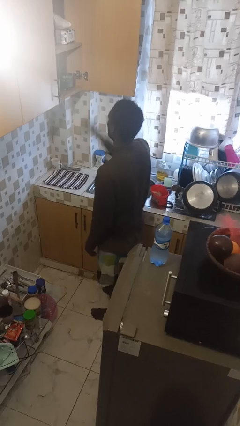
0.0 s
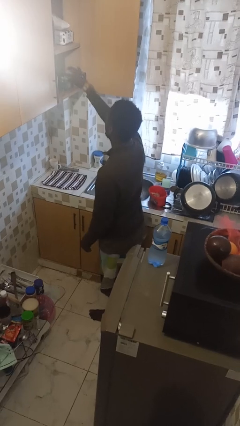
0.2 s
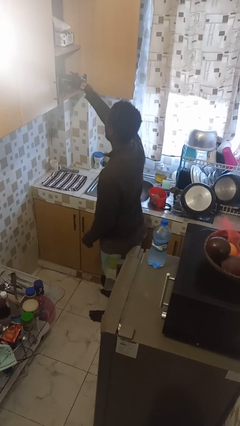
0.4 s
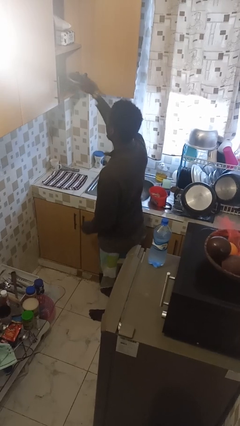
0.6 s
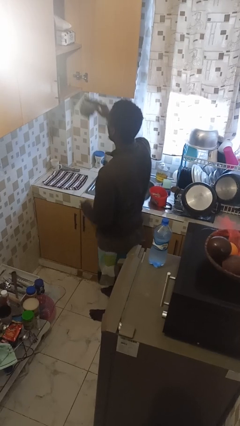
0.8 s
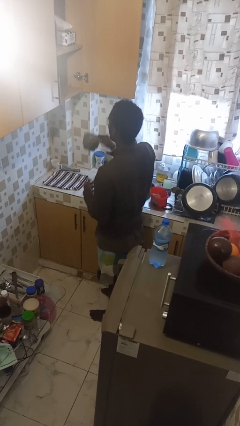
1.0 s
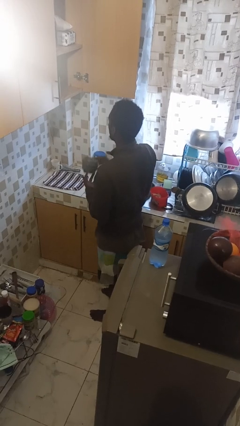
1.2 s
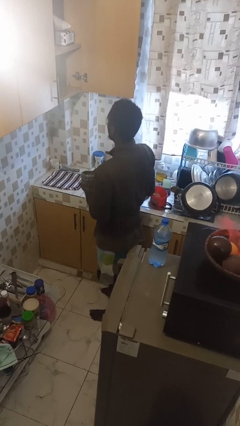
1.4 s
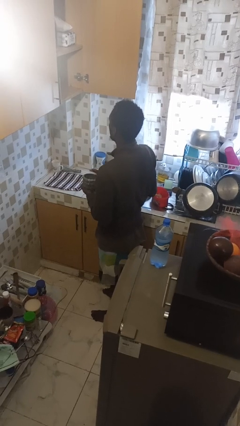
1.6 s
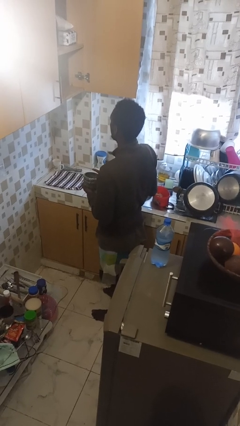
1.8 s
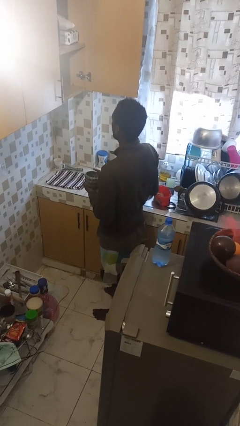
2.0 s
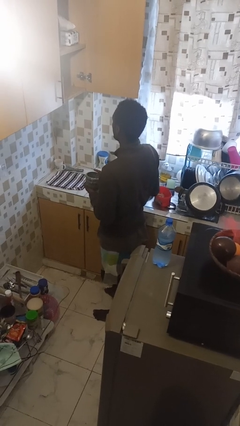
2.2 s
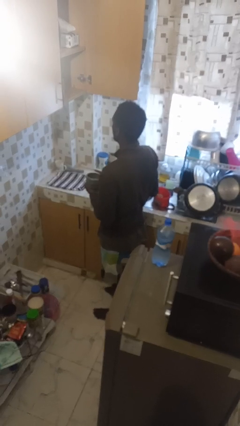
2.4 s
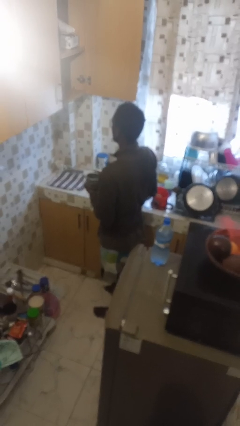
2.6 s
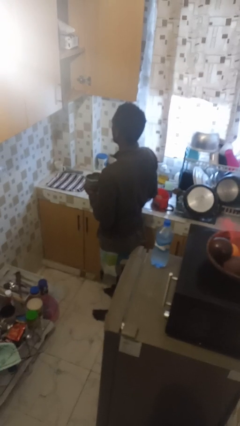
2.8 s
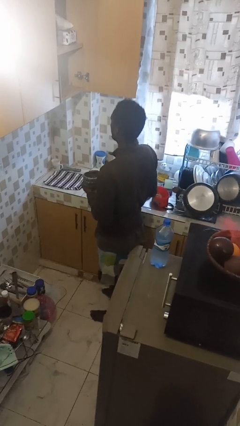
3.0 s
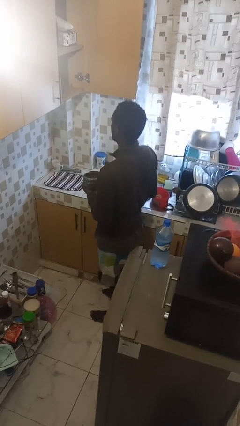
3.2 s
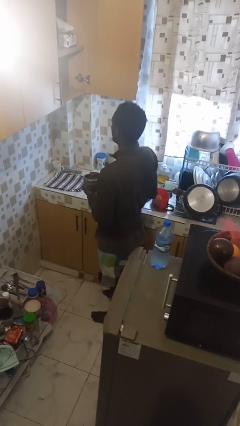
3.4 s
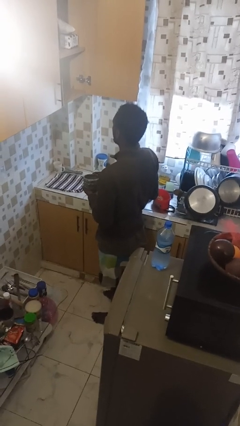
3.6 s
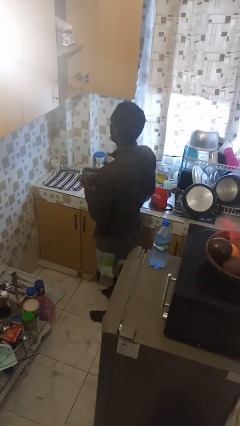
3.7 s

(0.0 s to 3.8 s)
person picks up object from cabinet

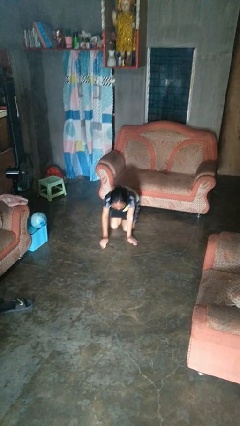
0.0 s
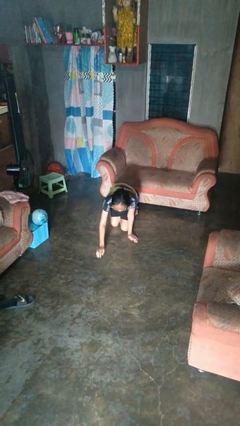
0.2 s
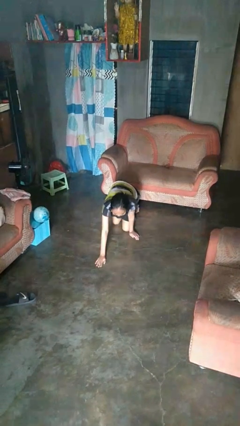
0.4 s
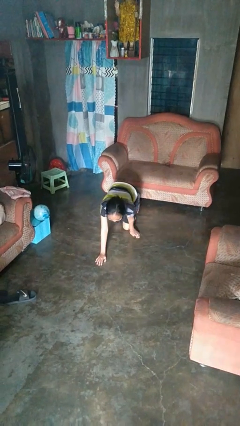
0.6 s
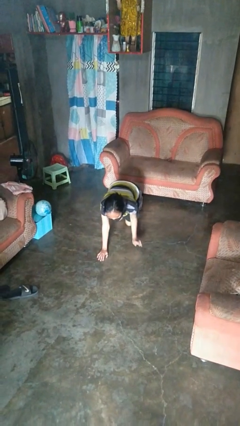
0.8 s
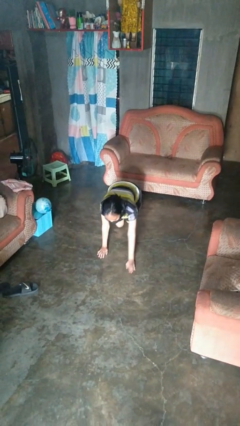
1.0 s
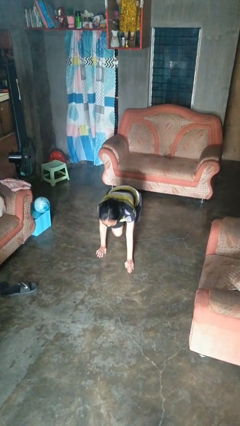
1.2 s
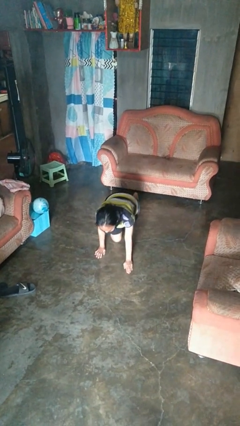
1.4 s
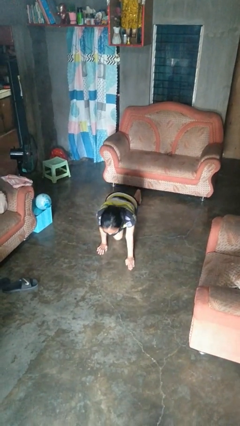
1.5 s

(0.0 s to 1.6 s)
person crawls

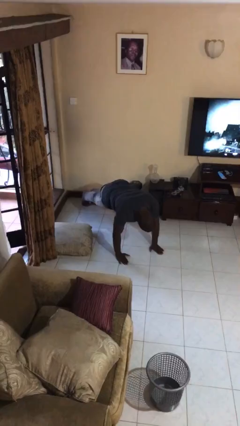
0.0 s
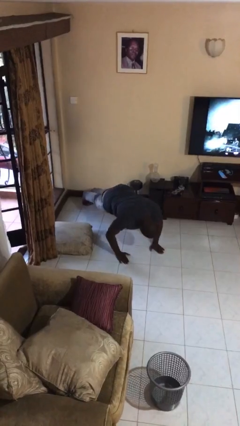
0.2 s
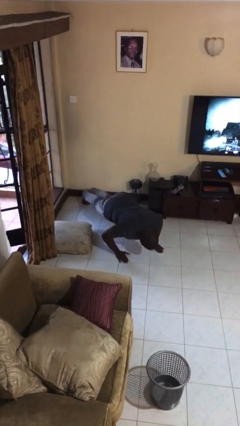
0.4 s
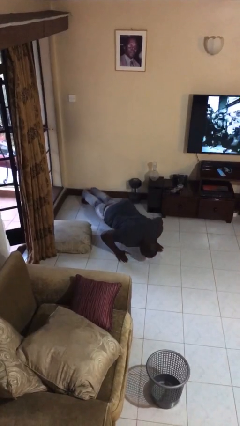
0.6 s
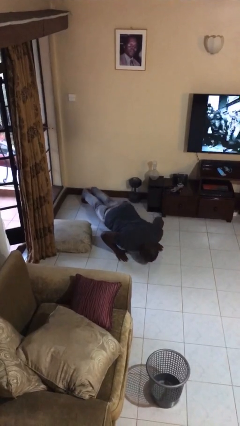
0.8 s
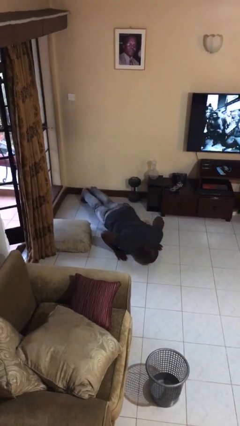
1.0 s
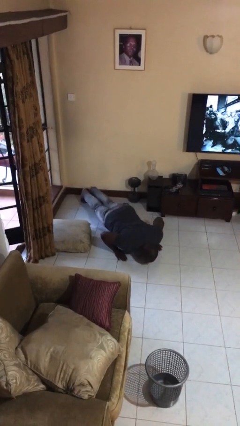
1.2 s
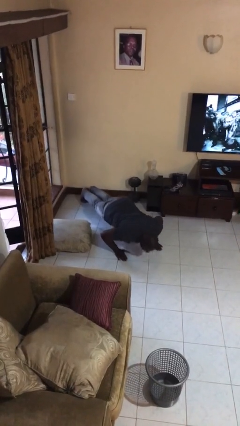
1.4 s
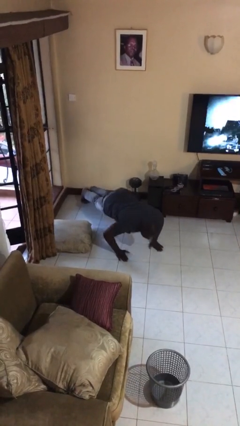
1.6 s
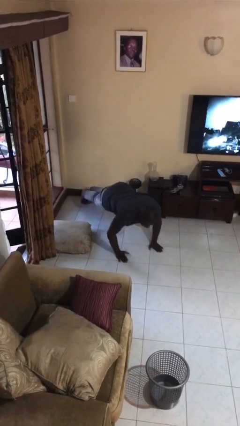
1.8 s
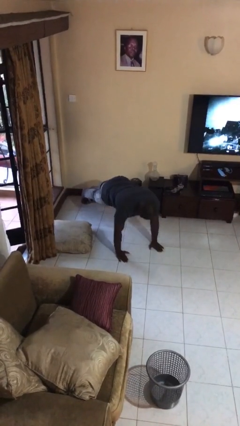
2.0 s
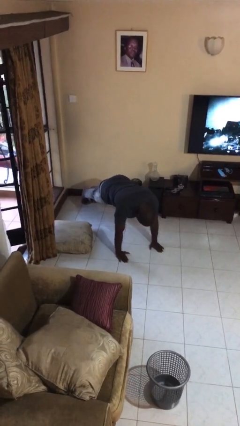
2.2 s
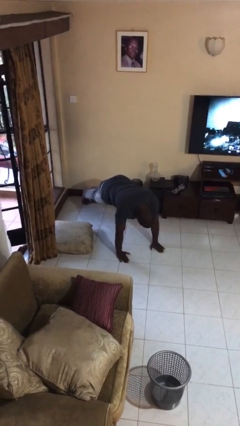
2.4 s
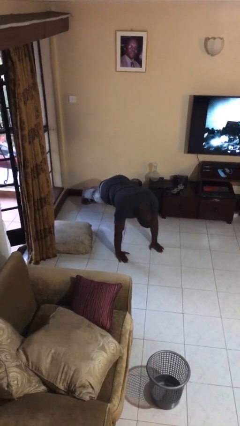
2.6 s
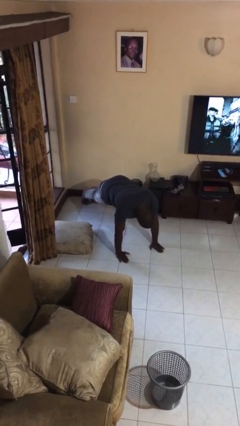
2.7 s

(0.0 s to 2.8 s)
person exercises with pushup

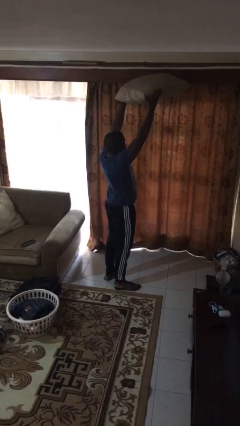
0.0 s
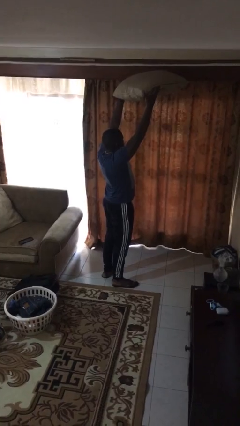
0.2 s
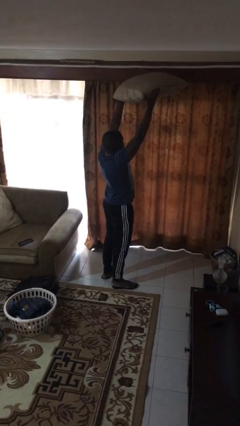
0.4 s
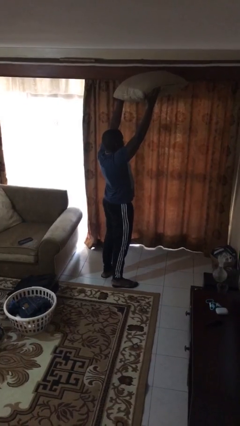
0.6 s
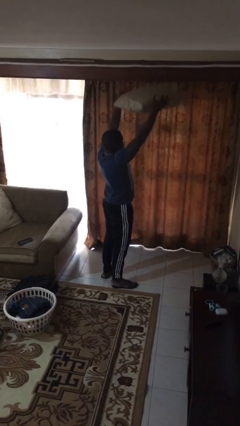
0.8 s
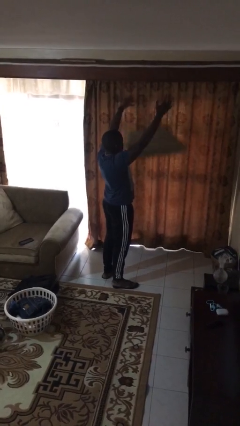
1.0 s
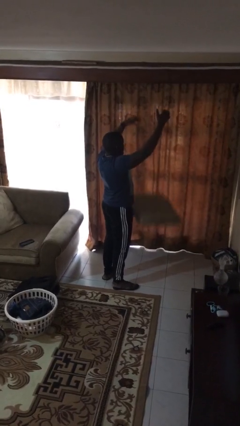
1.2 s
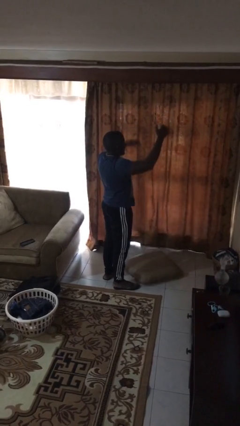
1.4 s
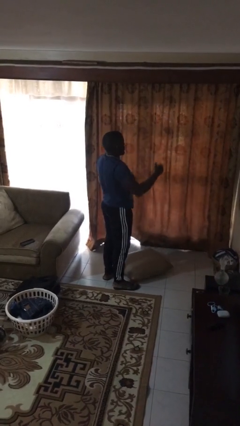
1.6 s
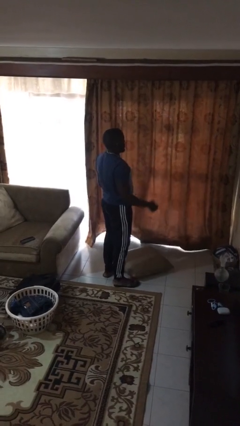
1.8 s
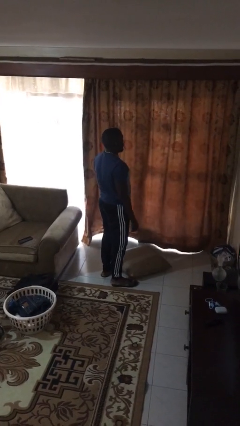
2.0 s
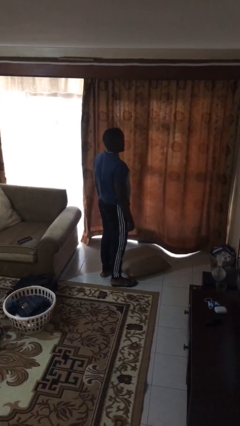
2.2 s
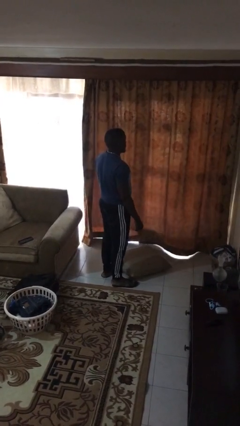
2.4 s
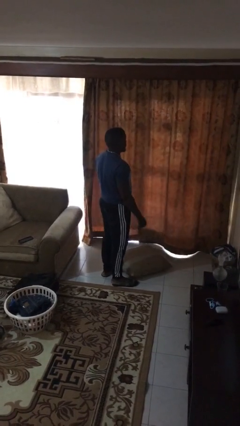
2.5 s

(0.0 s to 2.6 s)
person drops object

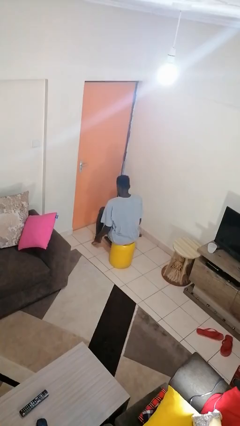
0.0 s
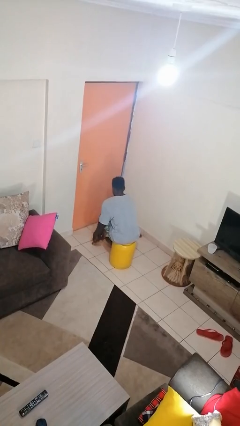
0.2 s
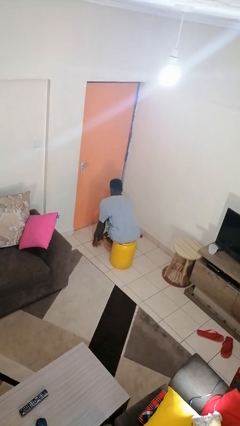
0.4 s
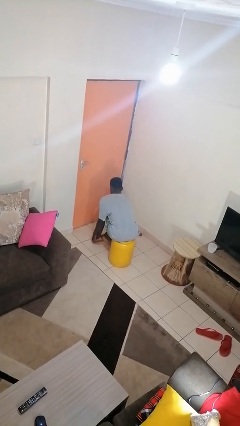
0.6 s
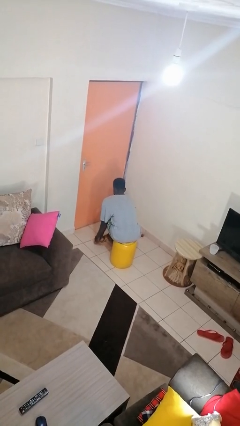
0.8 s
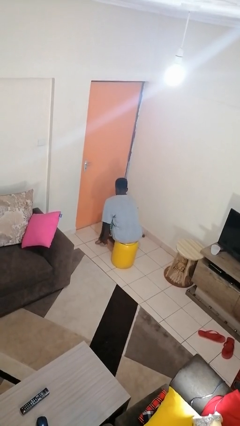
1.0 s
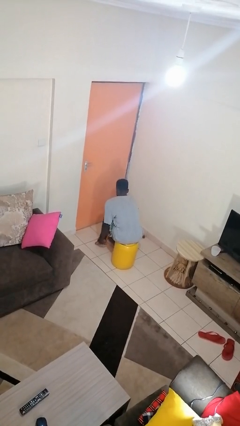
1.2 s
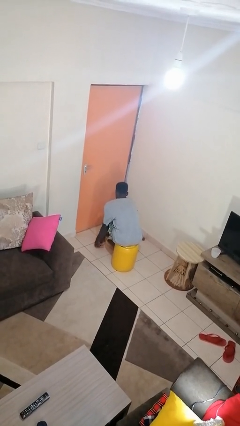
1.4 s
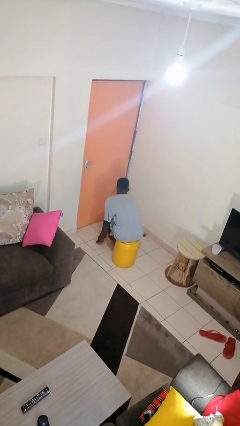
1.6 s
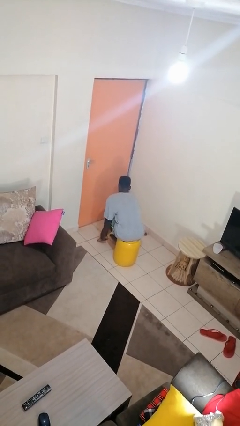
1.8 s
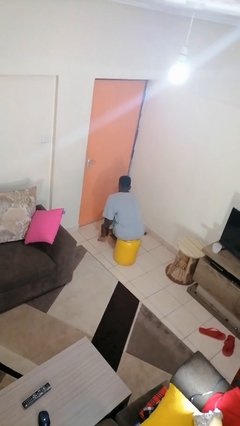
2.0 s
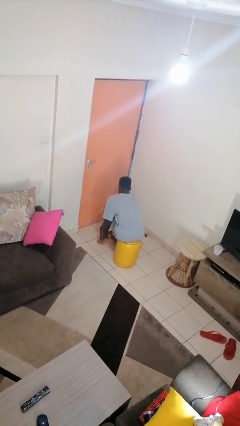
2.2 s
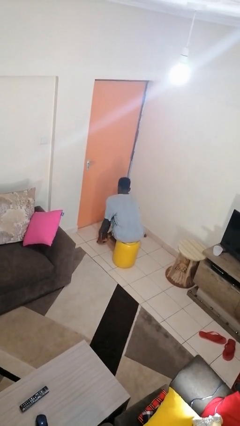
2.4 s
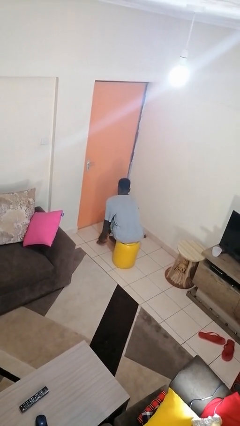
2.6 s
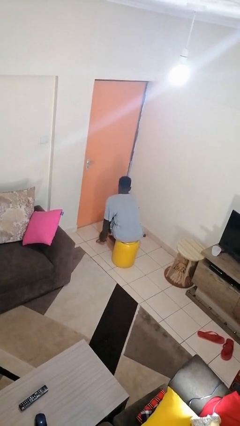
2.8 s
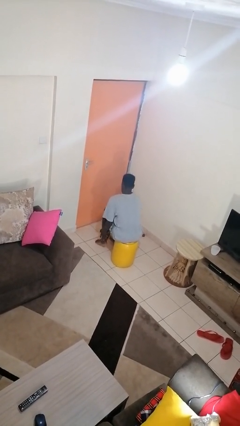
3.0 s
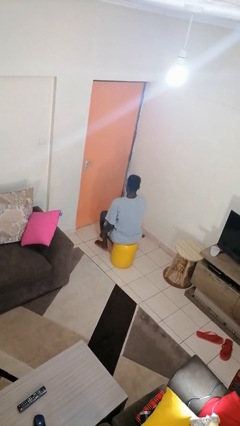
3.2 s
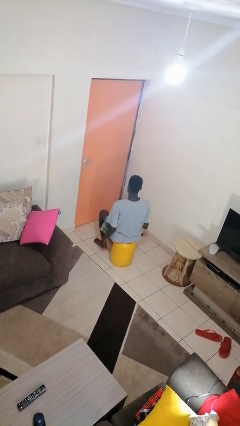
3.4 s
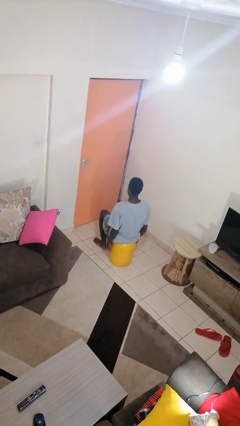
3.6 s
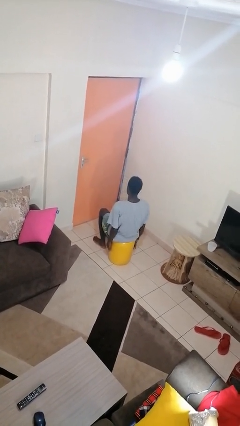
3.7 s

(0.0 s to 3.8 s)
person rubs foot

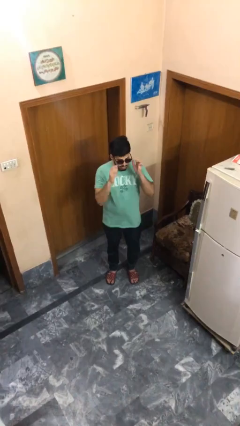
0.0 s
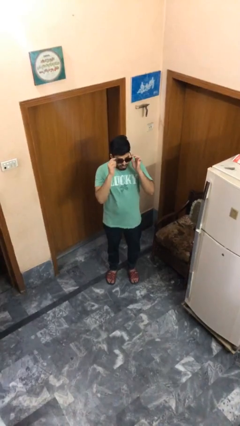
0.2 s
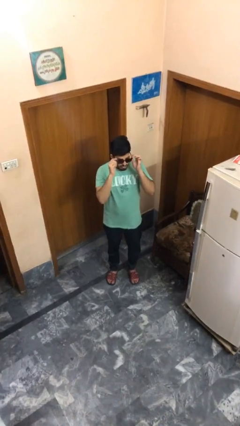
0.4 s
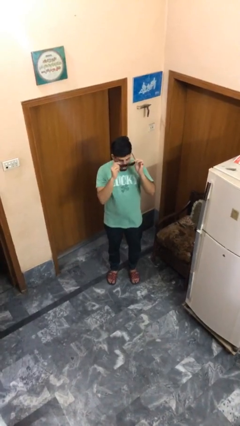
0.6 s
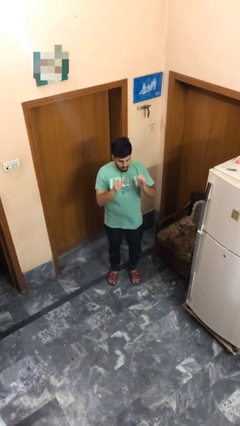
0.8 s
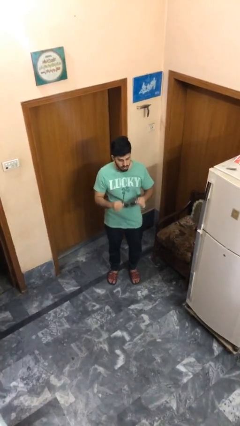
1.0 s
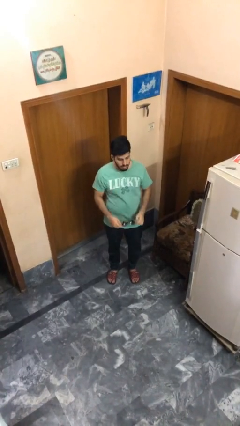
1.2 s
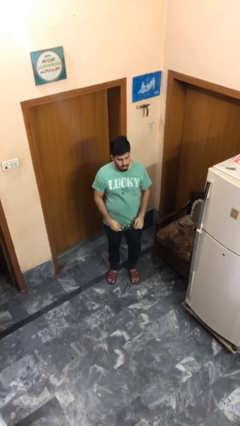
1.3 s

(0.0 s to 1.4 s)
person takes off sunglasses

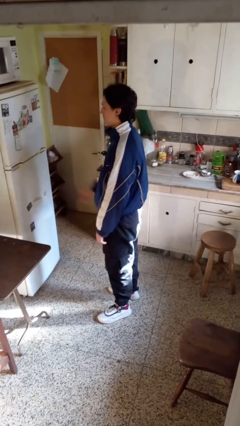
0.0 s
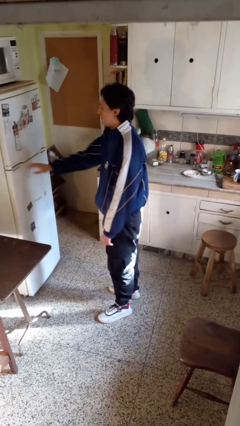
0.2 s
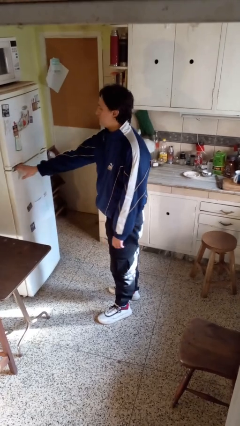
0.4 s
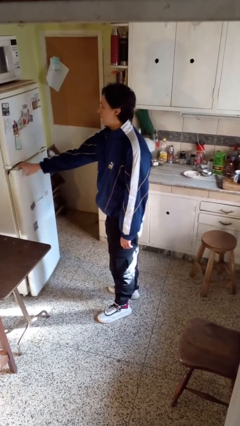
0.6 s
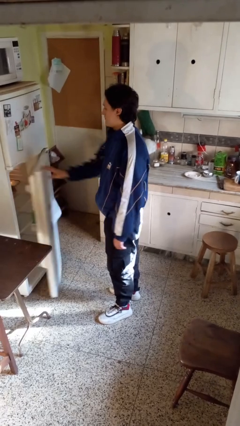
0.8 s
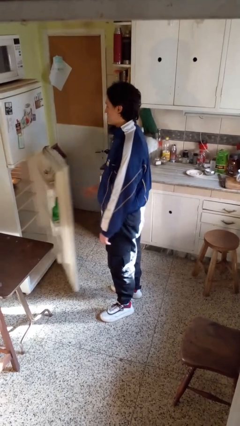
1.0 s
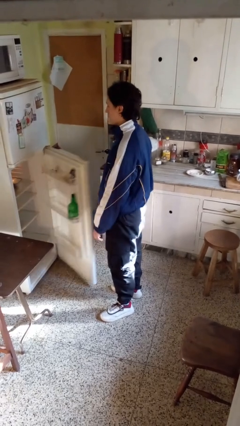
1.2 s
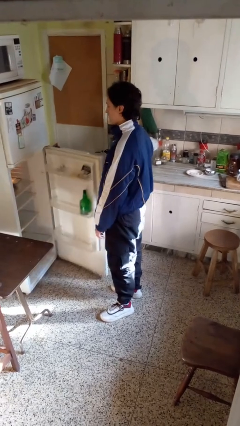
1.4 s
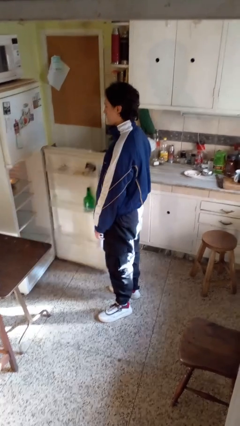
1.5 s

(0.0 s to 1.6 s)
person opens refrigerator
